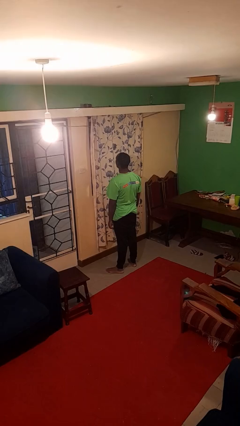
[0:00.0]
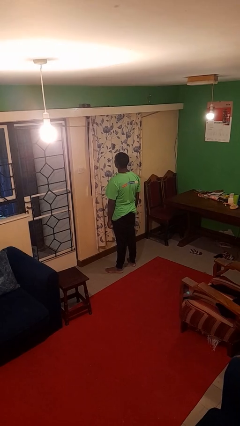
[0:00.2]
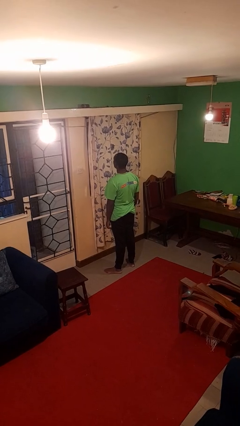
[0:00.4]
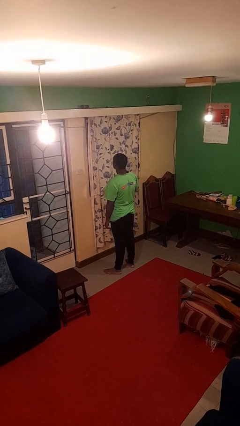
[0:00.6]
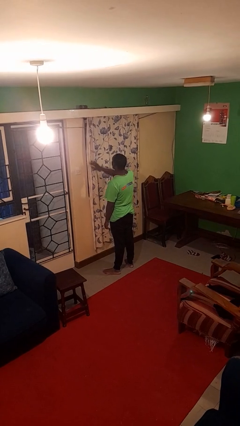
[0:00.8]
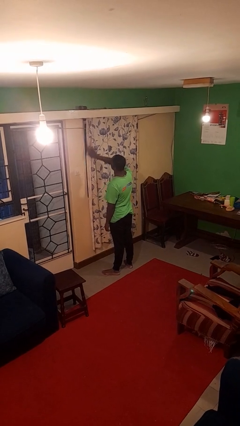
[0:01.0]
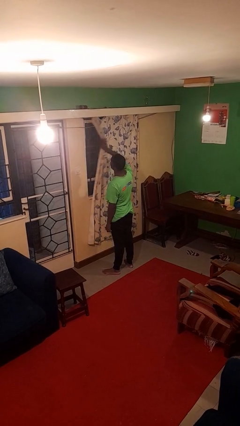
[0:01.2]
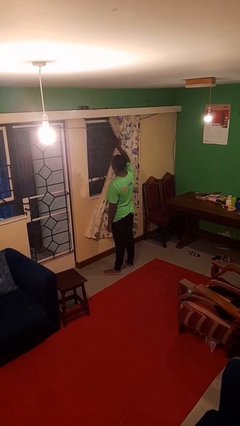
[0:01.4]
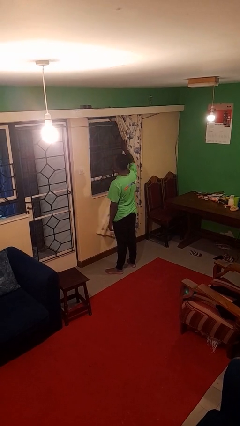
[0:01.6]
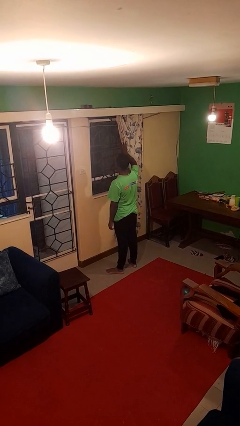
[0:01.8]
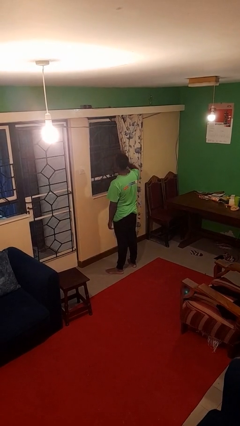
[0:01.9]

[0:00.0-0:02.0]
person opens curtains

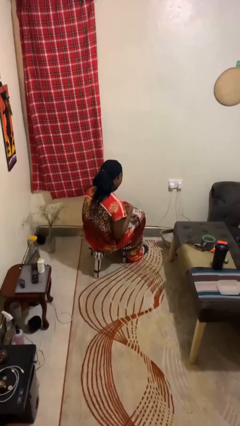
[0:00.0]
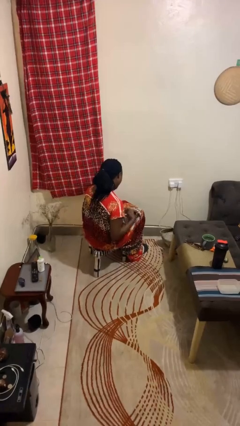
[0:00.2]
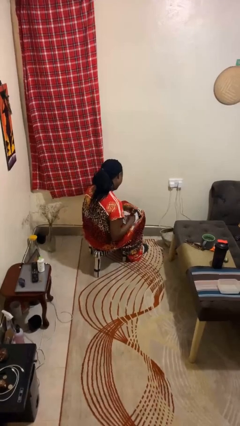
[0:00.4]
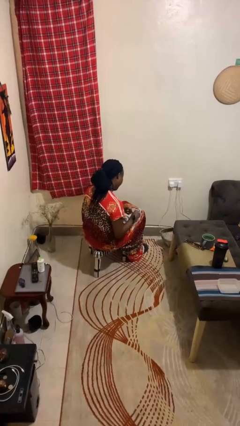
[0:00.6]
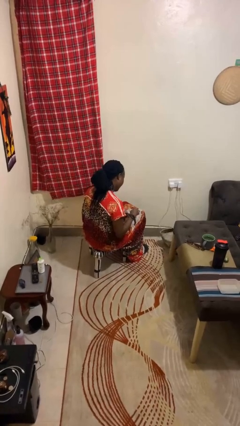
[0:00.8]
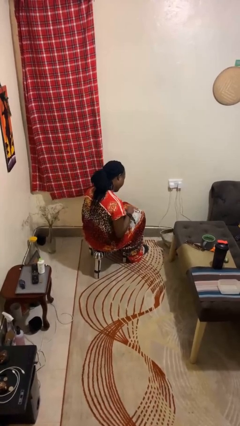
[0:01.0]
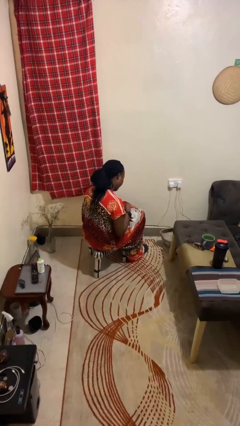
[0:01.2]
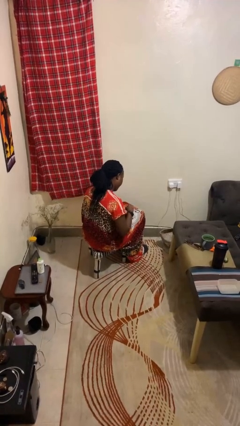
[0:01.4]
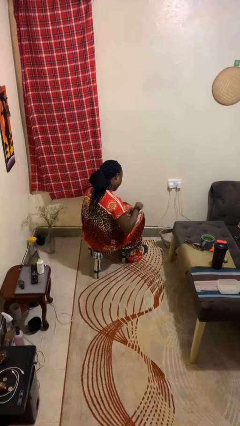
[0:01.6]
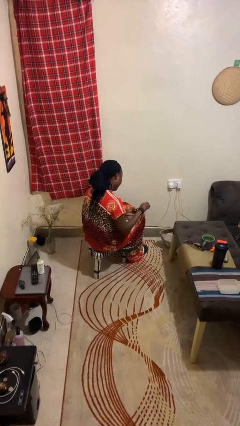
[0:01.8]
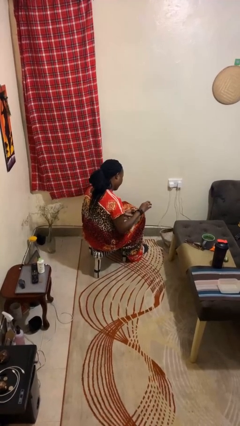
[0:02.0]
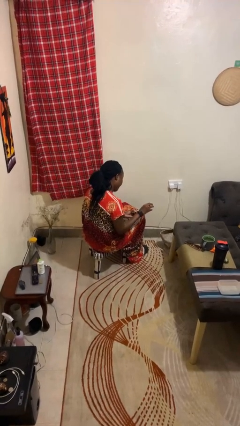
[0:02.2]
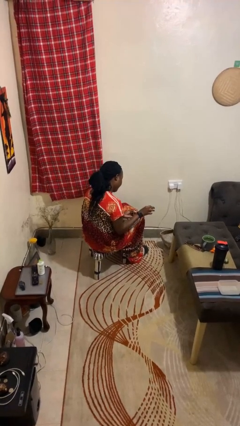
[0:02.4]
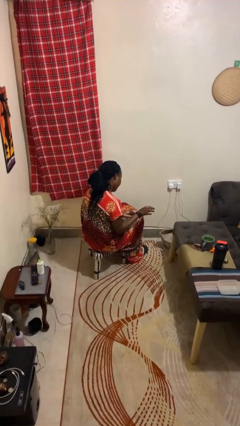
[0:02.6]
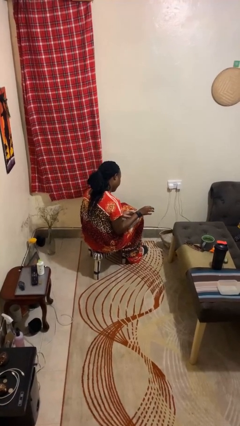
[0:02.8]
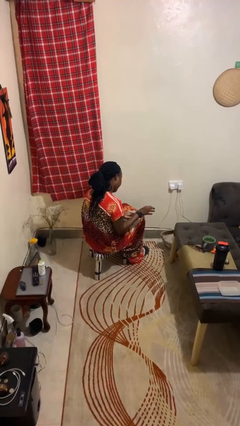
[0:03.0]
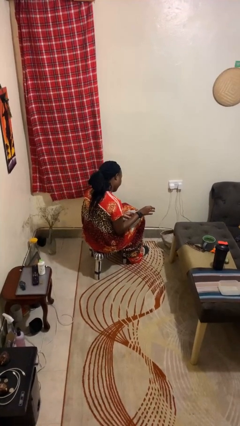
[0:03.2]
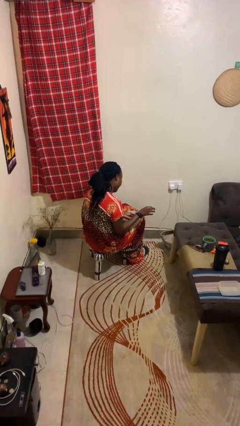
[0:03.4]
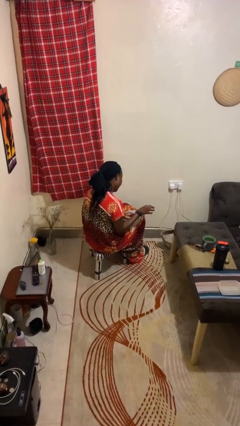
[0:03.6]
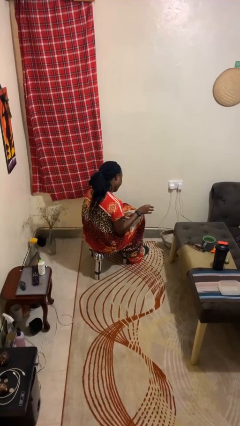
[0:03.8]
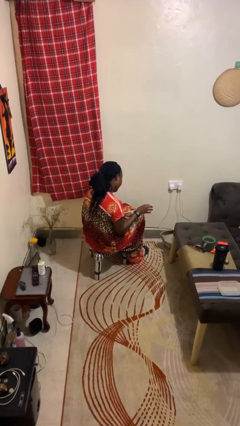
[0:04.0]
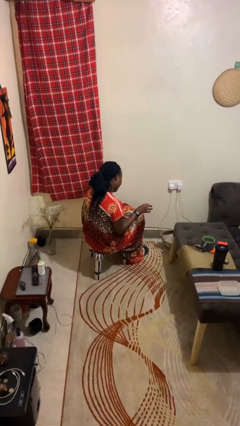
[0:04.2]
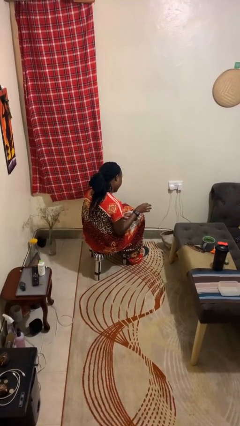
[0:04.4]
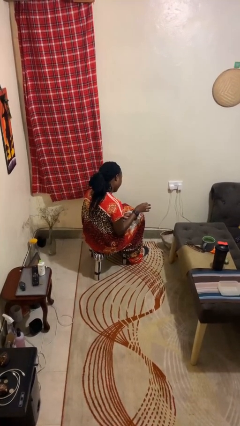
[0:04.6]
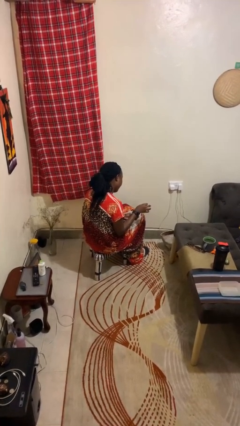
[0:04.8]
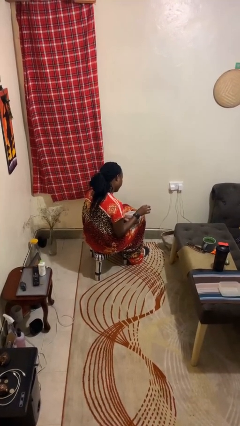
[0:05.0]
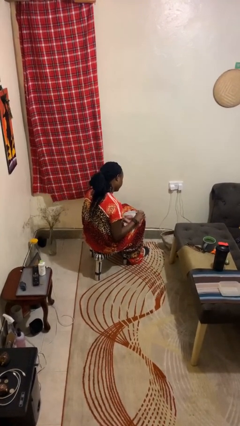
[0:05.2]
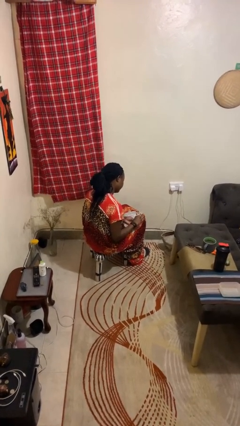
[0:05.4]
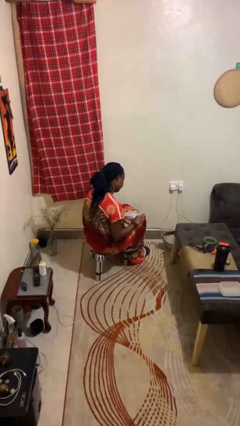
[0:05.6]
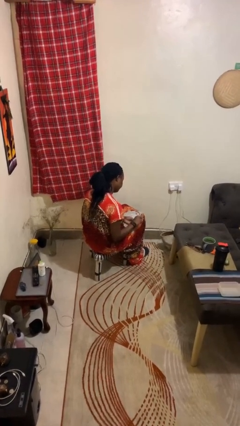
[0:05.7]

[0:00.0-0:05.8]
person puts on wristwatch

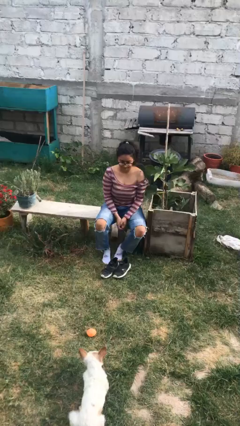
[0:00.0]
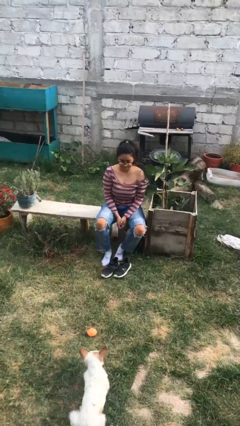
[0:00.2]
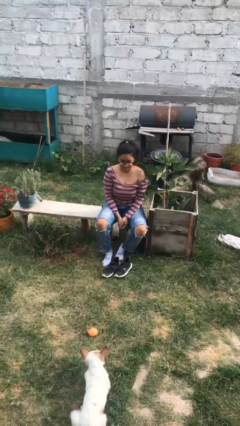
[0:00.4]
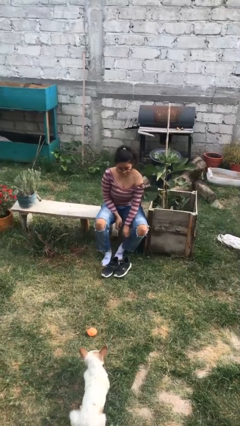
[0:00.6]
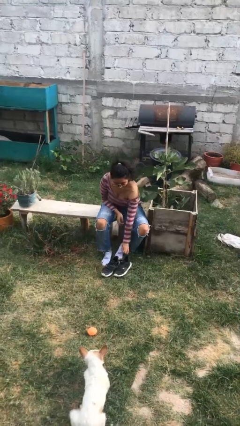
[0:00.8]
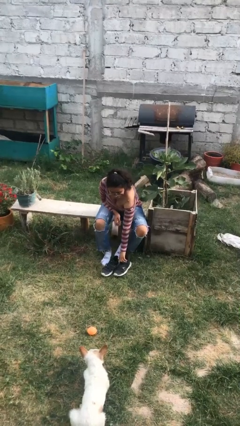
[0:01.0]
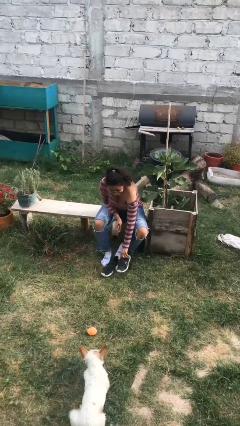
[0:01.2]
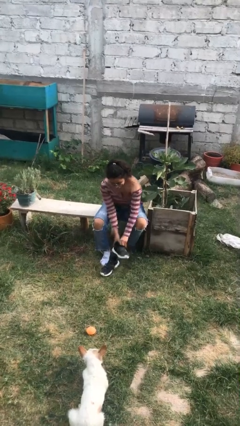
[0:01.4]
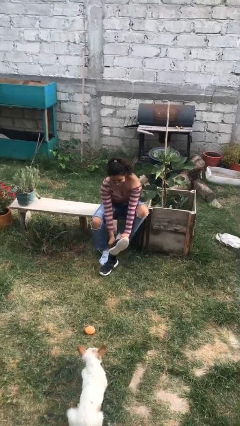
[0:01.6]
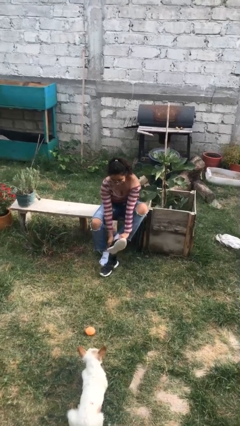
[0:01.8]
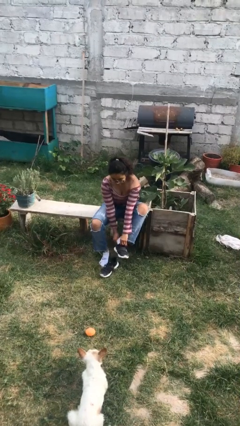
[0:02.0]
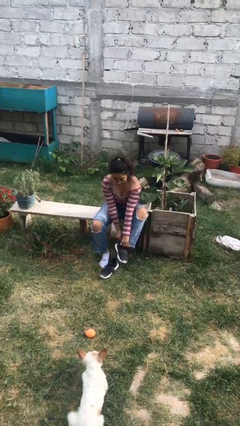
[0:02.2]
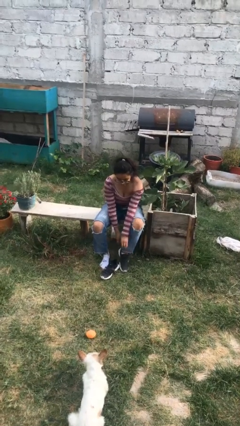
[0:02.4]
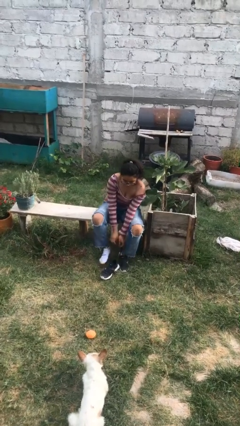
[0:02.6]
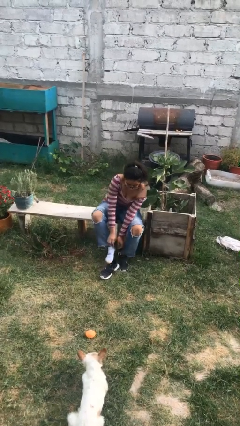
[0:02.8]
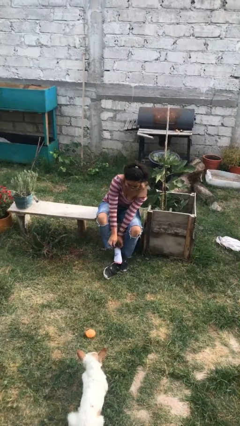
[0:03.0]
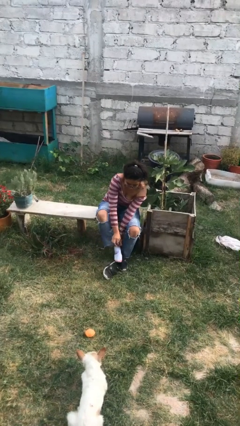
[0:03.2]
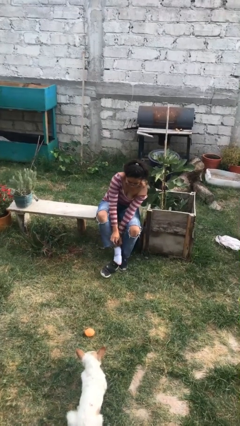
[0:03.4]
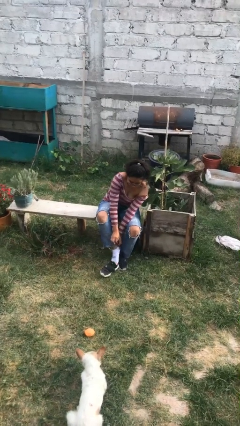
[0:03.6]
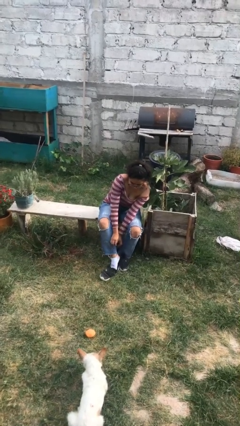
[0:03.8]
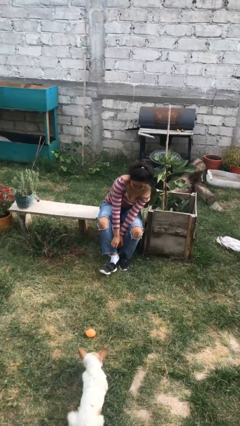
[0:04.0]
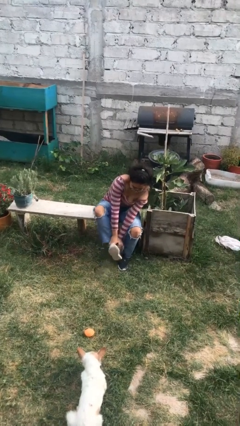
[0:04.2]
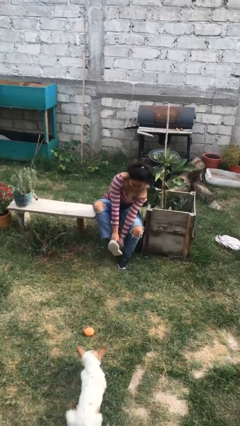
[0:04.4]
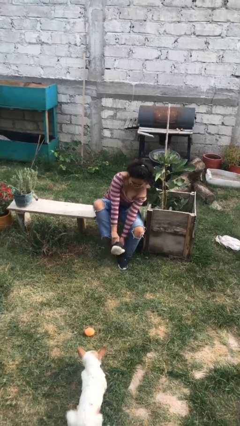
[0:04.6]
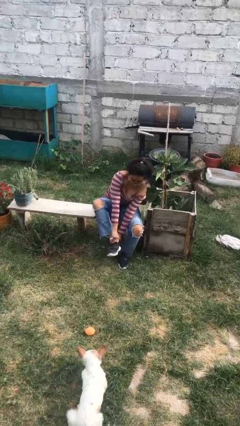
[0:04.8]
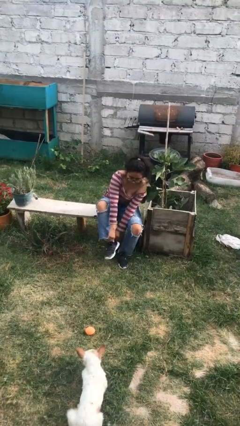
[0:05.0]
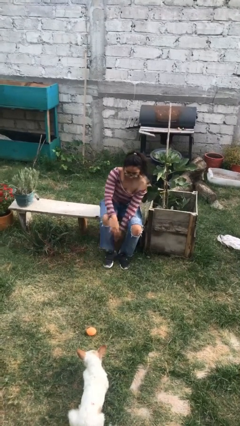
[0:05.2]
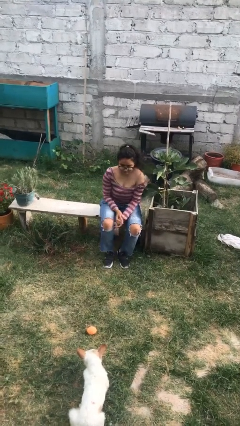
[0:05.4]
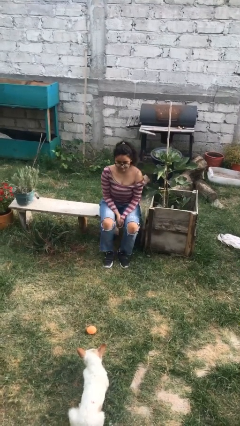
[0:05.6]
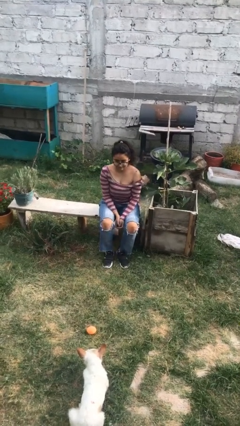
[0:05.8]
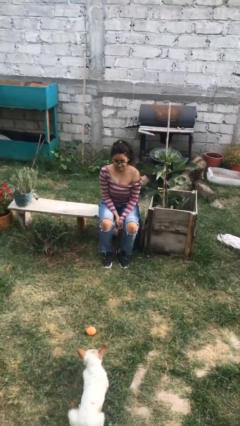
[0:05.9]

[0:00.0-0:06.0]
person puts on shoes

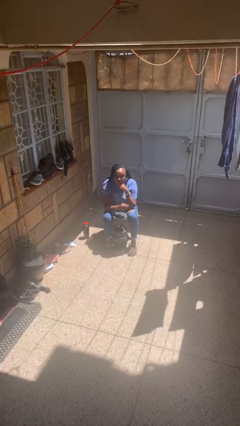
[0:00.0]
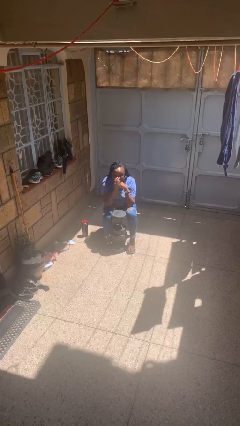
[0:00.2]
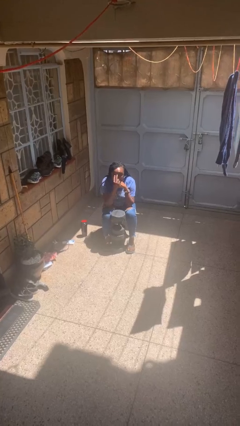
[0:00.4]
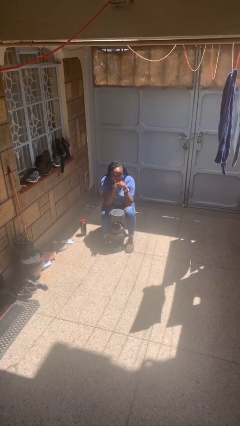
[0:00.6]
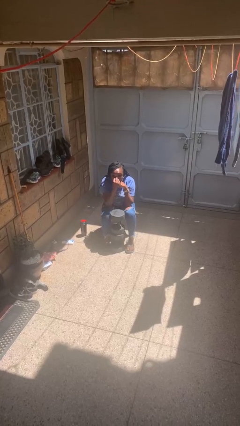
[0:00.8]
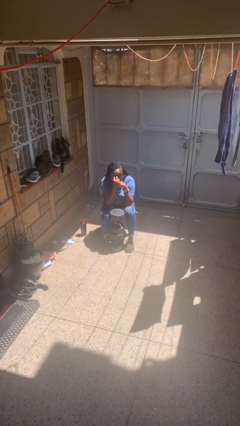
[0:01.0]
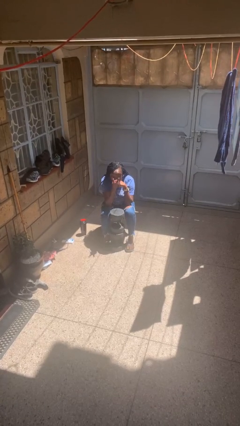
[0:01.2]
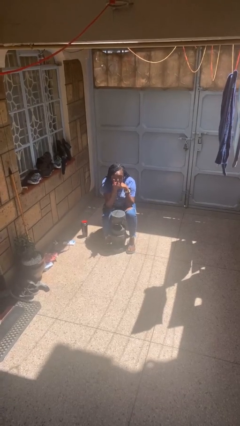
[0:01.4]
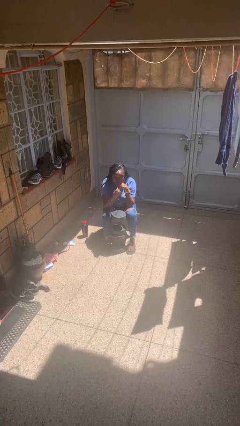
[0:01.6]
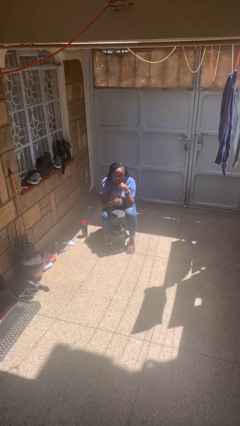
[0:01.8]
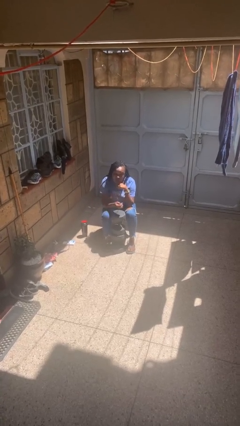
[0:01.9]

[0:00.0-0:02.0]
person gestures watch closely

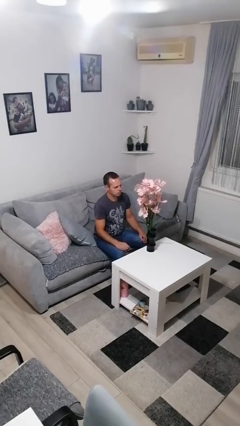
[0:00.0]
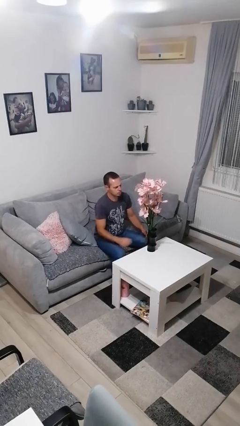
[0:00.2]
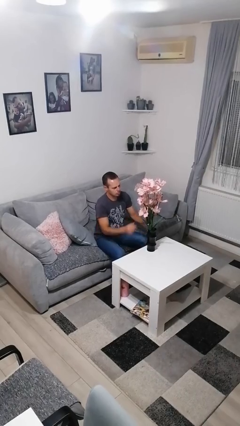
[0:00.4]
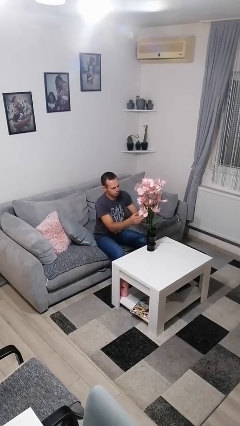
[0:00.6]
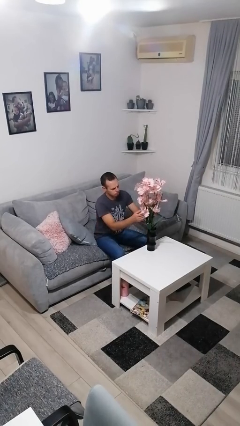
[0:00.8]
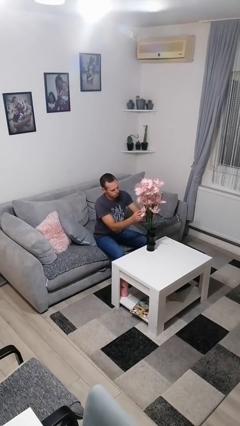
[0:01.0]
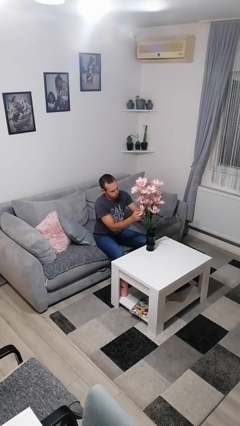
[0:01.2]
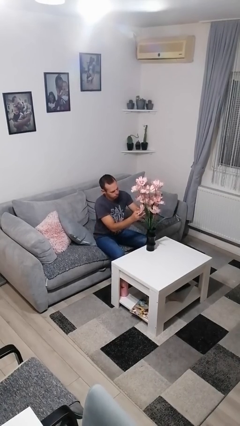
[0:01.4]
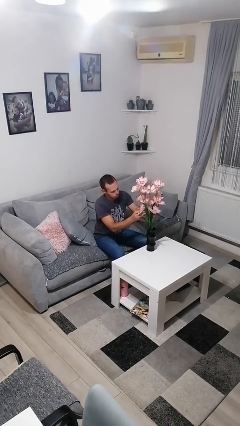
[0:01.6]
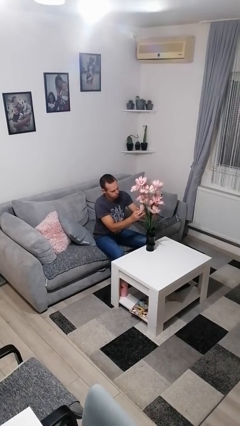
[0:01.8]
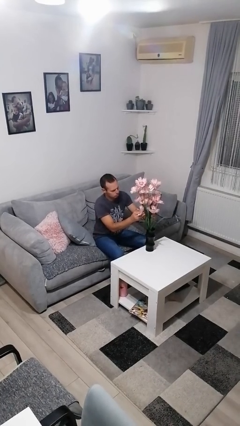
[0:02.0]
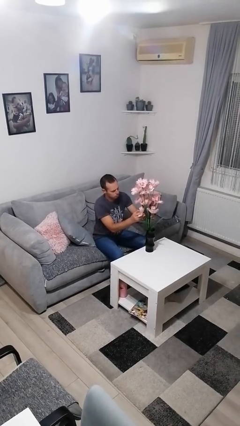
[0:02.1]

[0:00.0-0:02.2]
person arranges flowers in vase
